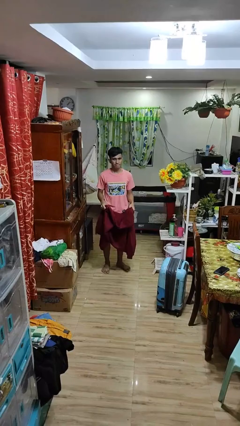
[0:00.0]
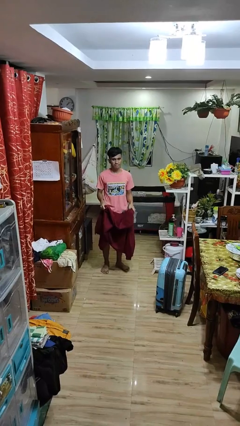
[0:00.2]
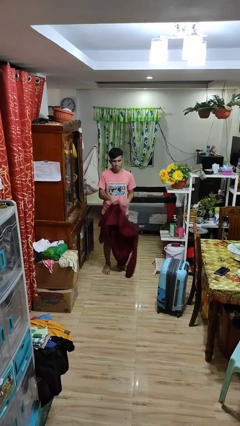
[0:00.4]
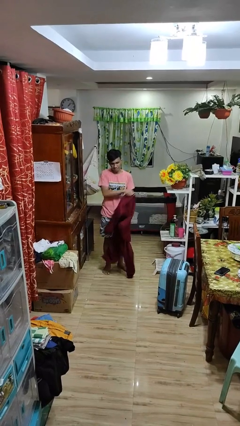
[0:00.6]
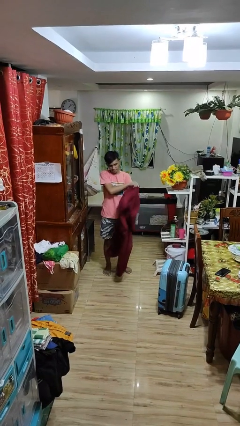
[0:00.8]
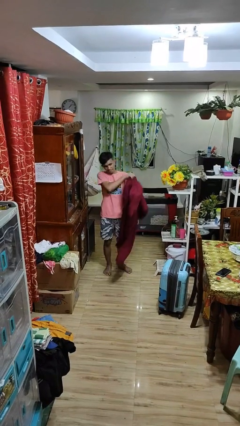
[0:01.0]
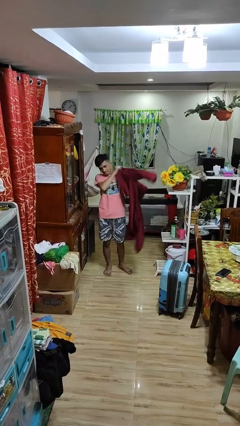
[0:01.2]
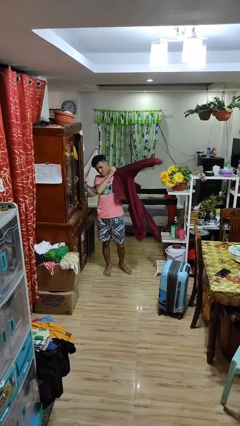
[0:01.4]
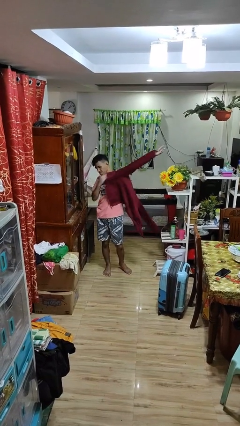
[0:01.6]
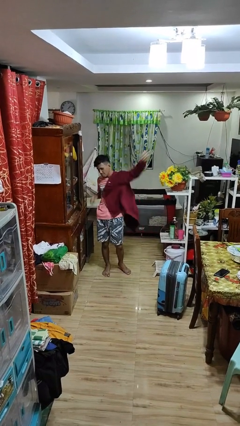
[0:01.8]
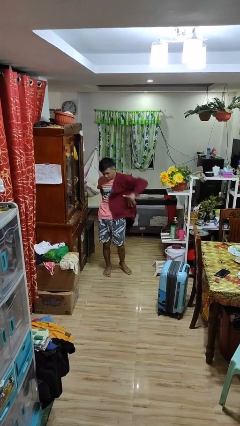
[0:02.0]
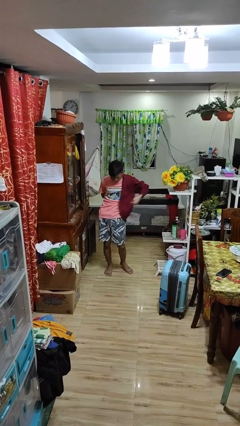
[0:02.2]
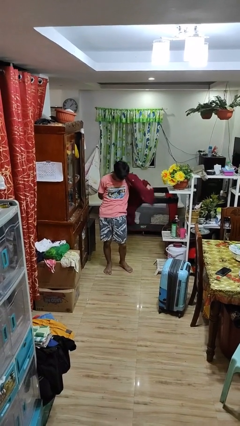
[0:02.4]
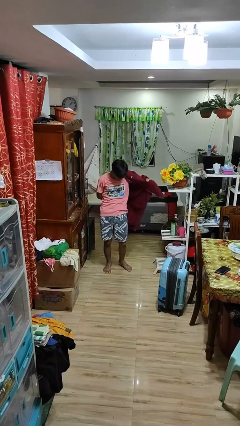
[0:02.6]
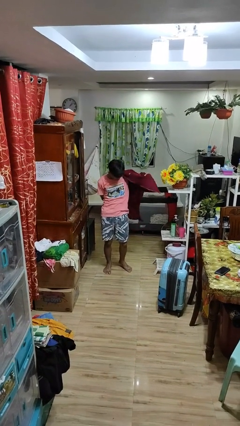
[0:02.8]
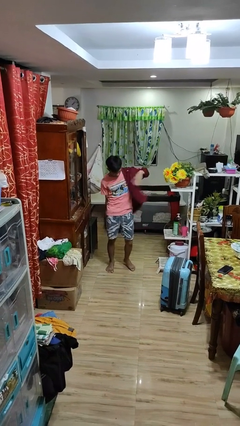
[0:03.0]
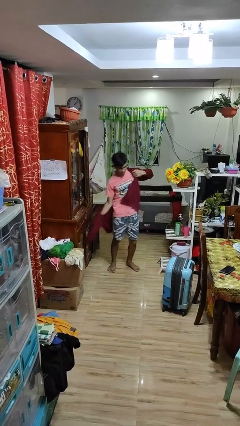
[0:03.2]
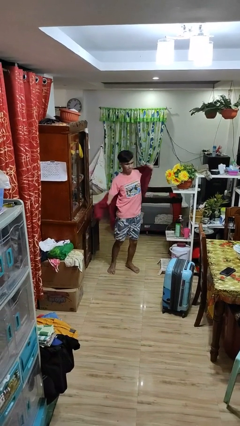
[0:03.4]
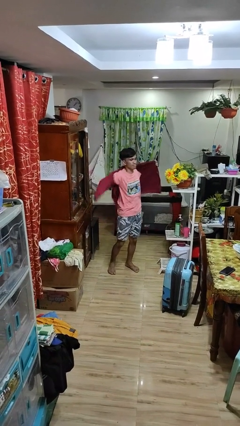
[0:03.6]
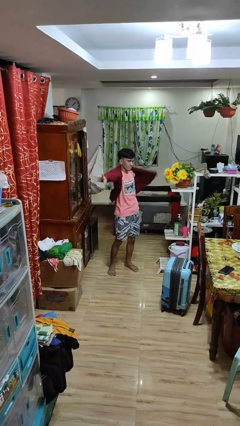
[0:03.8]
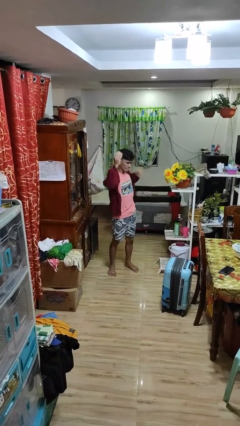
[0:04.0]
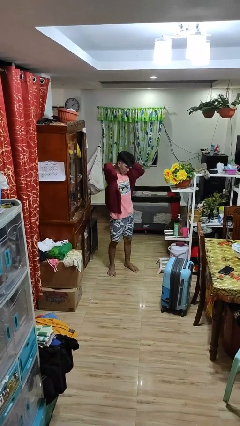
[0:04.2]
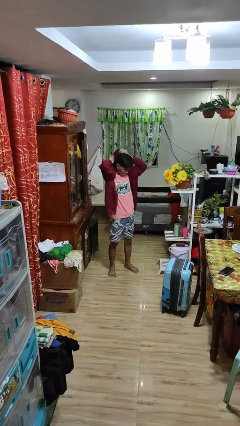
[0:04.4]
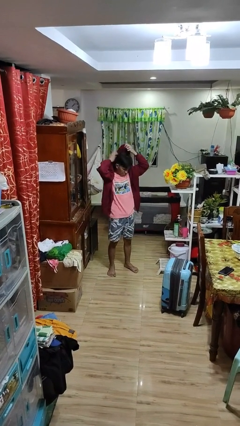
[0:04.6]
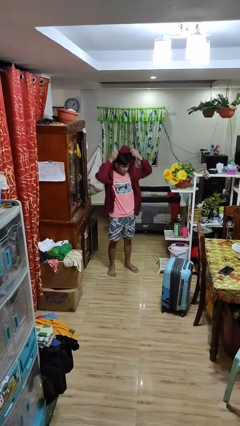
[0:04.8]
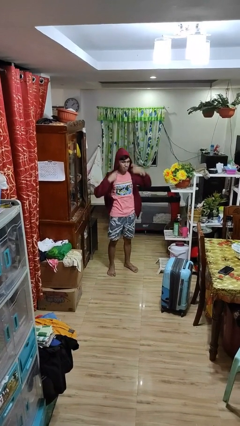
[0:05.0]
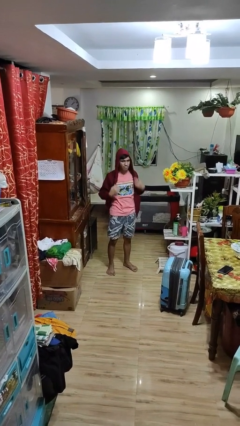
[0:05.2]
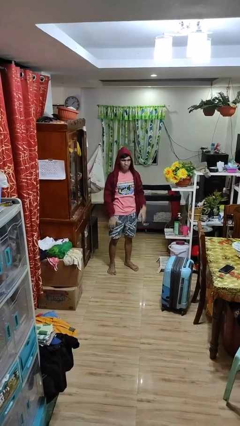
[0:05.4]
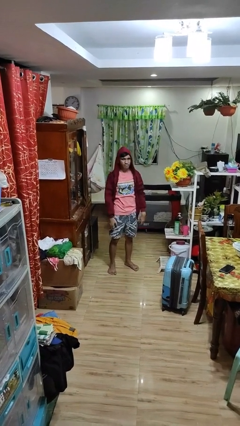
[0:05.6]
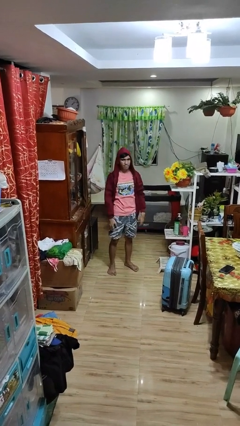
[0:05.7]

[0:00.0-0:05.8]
person puts on hoodie

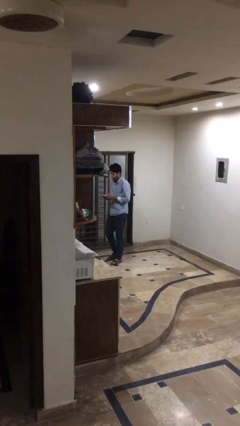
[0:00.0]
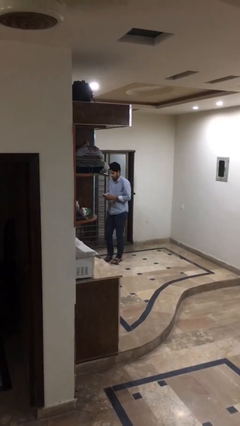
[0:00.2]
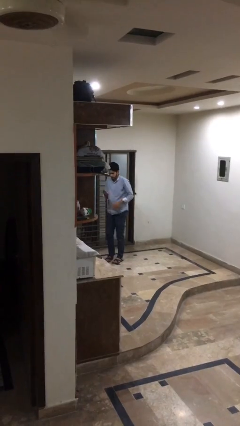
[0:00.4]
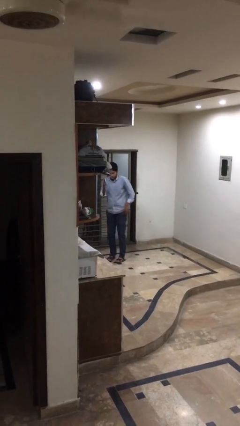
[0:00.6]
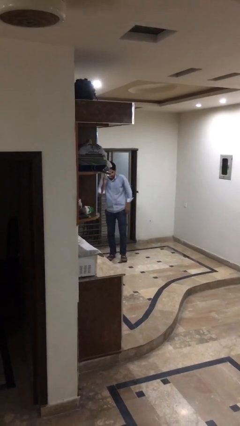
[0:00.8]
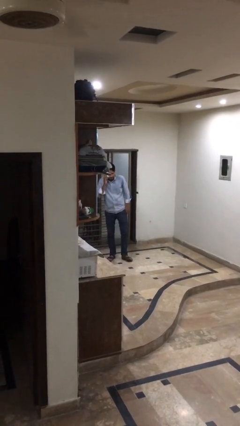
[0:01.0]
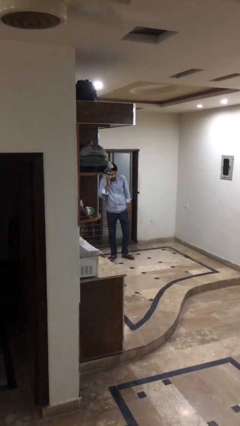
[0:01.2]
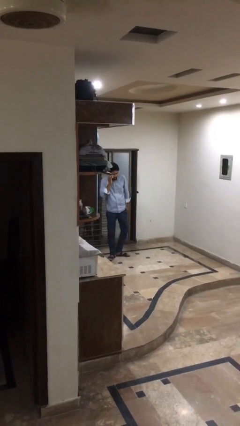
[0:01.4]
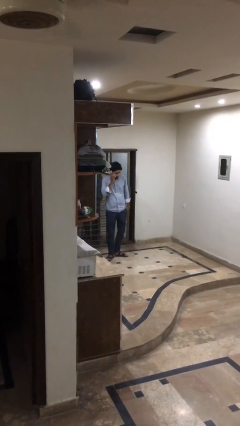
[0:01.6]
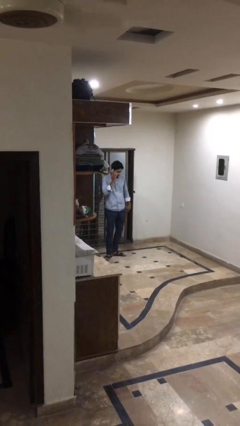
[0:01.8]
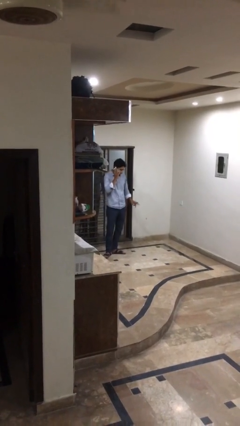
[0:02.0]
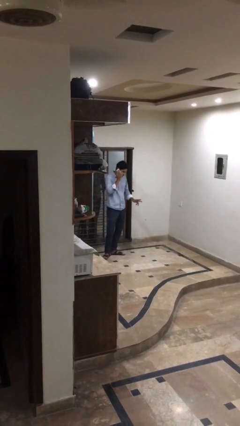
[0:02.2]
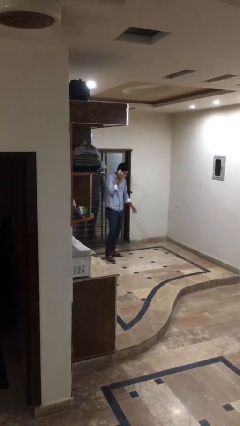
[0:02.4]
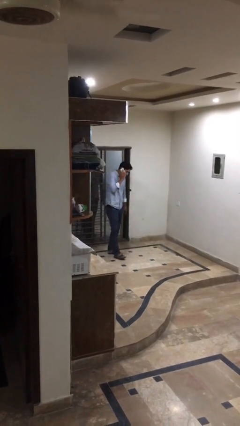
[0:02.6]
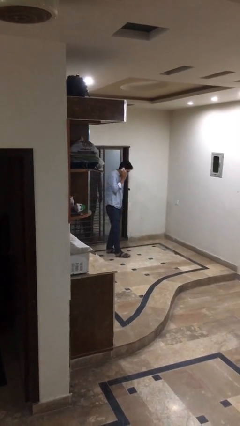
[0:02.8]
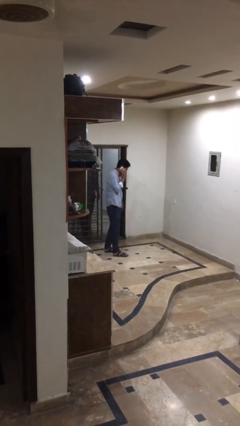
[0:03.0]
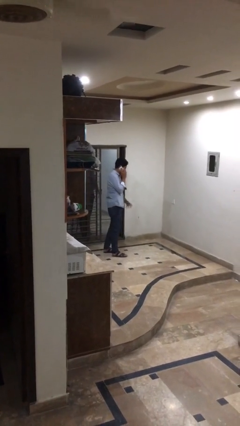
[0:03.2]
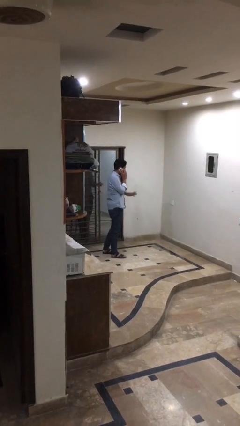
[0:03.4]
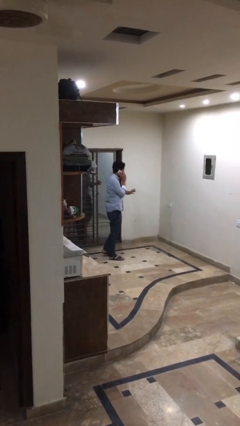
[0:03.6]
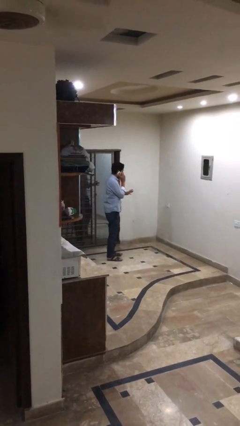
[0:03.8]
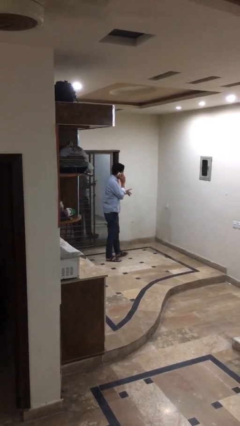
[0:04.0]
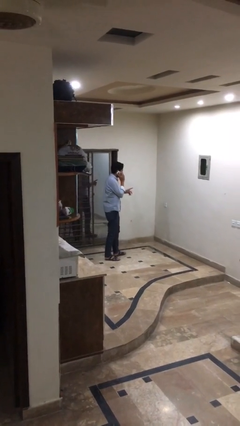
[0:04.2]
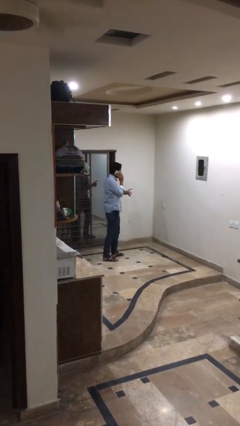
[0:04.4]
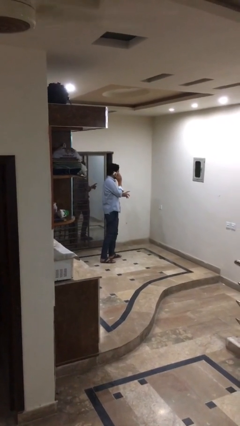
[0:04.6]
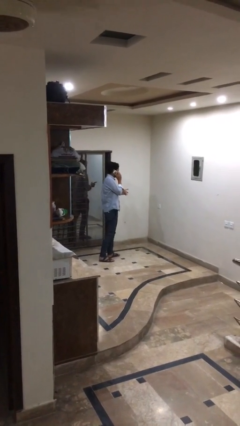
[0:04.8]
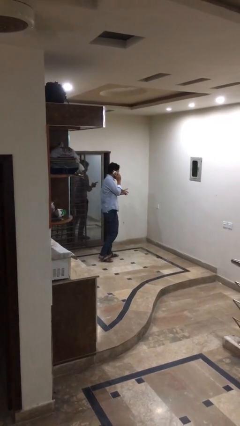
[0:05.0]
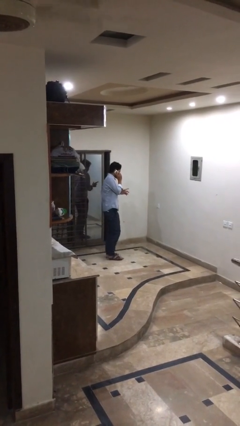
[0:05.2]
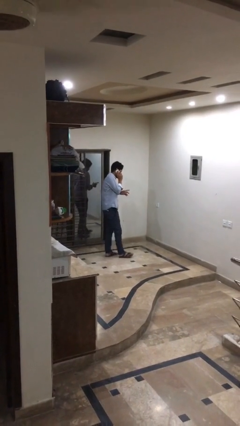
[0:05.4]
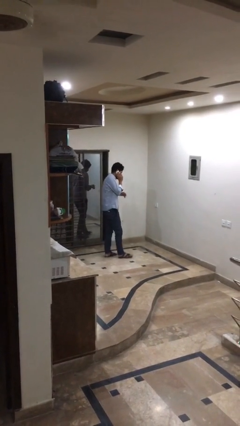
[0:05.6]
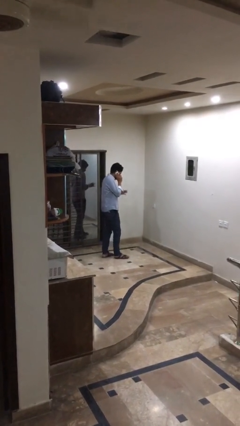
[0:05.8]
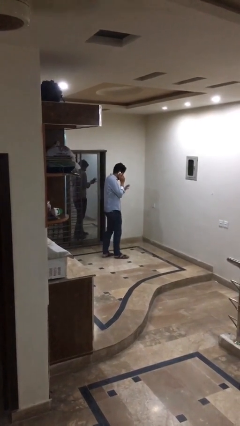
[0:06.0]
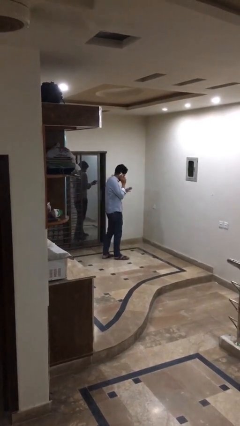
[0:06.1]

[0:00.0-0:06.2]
person talks on phone

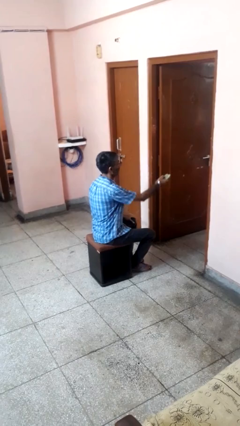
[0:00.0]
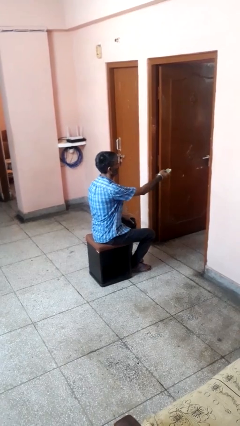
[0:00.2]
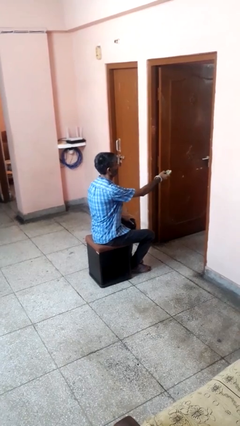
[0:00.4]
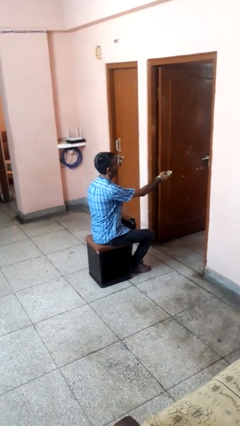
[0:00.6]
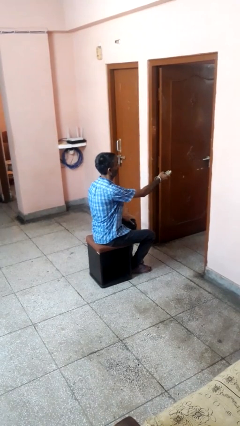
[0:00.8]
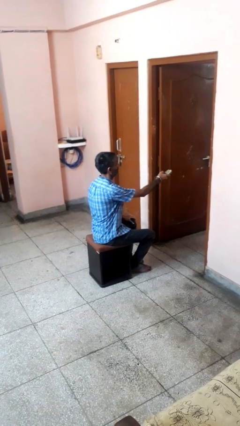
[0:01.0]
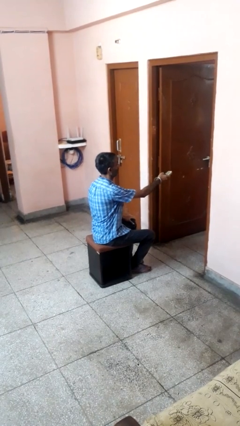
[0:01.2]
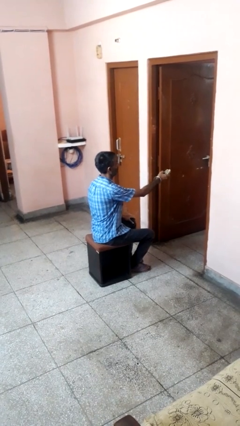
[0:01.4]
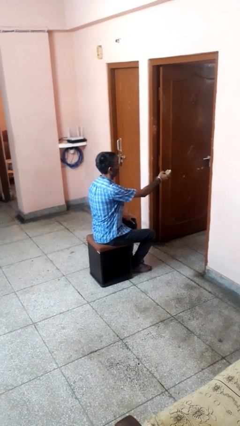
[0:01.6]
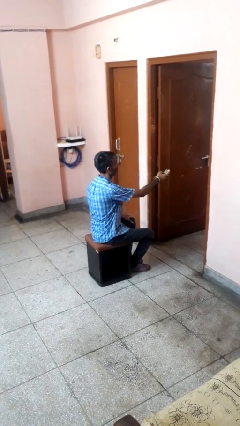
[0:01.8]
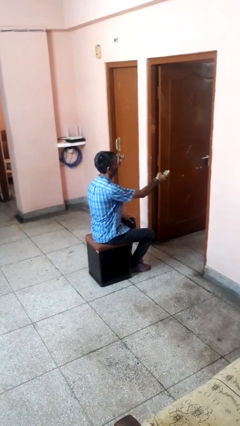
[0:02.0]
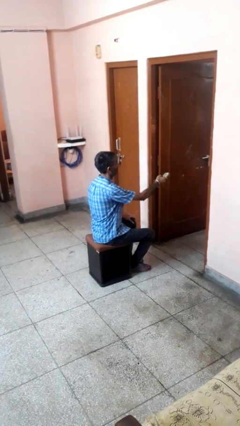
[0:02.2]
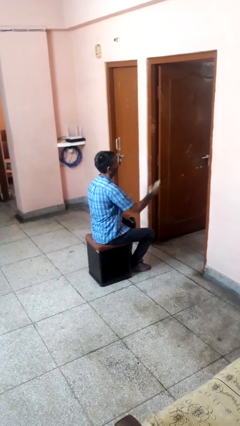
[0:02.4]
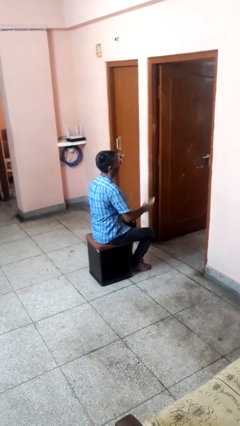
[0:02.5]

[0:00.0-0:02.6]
person uses television remote

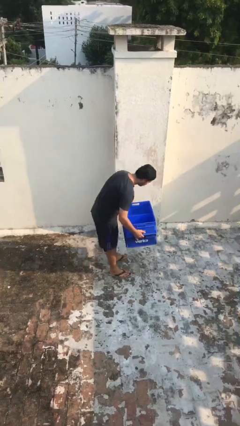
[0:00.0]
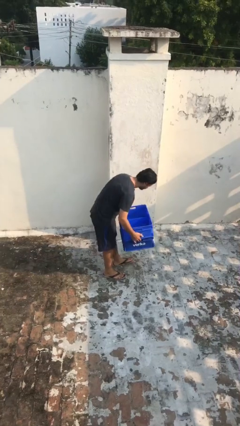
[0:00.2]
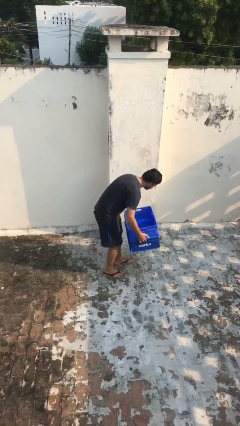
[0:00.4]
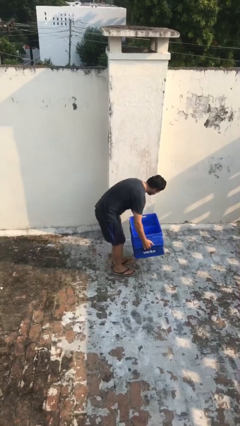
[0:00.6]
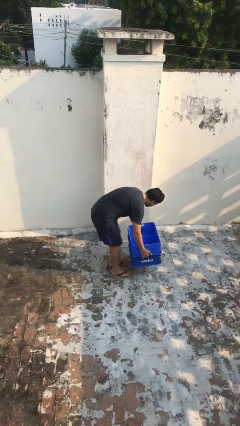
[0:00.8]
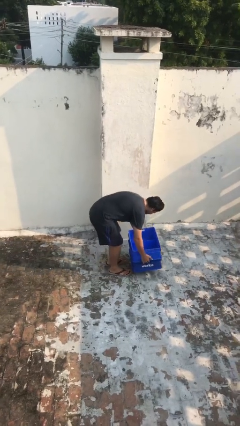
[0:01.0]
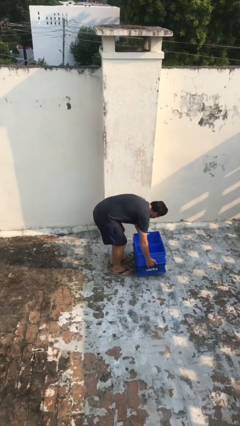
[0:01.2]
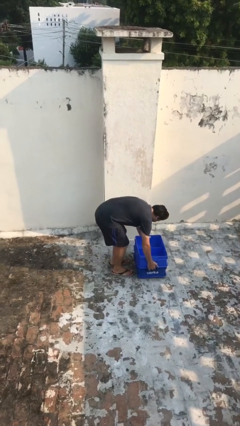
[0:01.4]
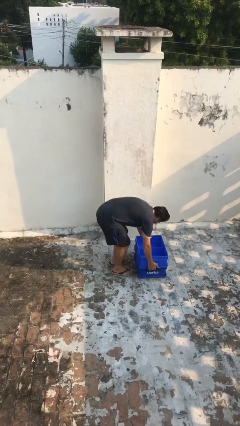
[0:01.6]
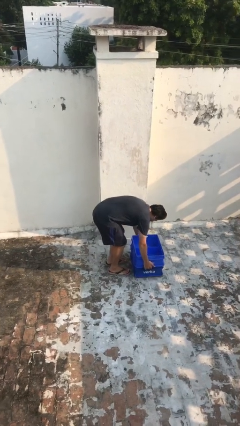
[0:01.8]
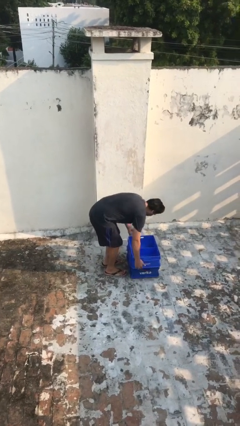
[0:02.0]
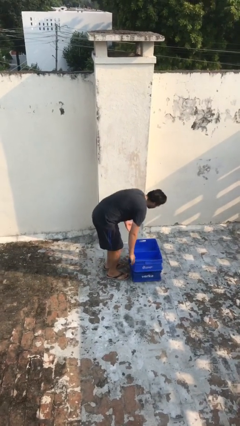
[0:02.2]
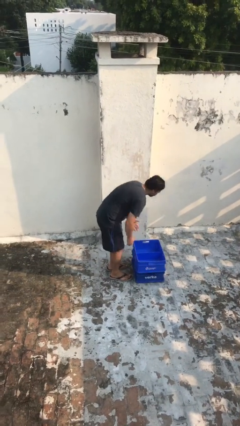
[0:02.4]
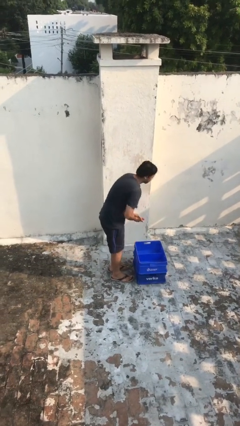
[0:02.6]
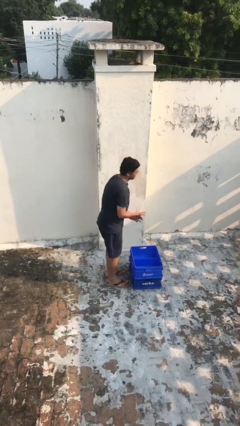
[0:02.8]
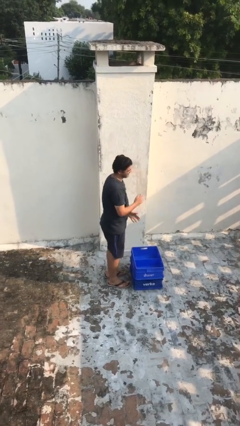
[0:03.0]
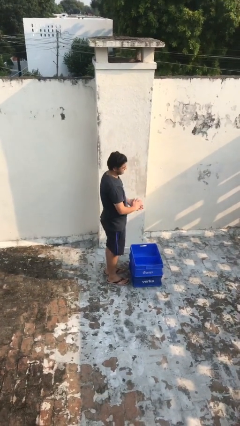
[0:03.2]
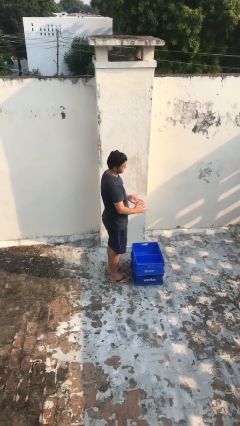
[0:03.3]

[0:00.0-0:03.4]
person puts down object on floor
